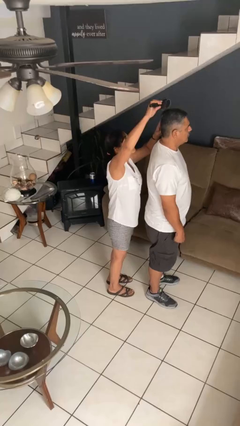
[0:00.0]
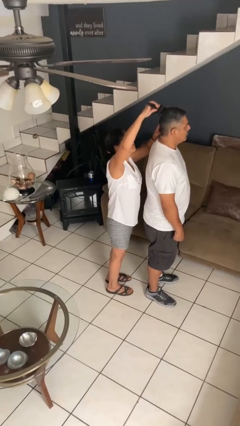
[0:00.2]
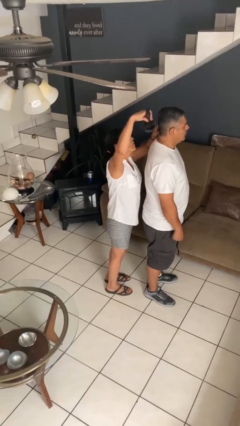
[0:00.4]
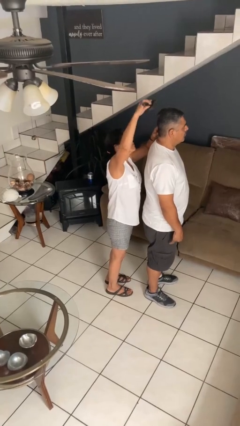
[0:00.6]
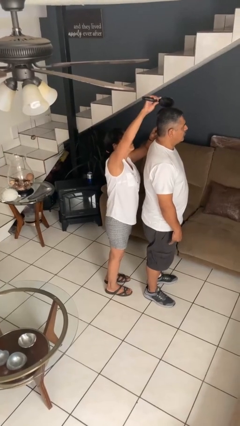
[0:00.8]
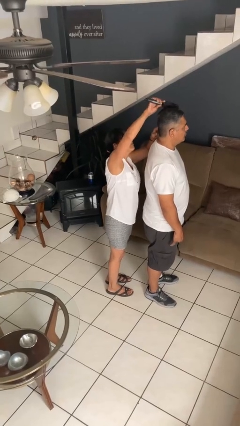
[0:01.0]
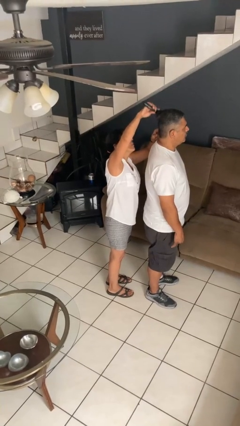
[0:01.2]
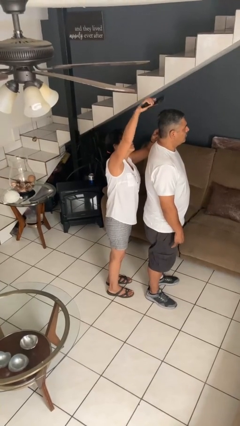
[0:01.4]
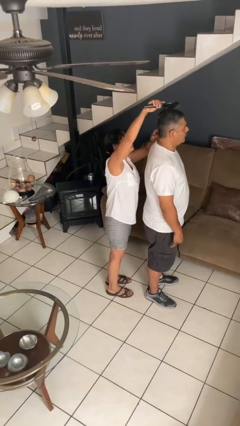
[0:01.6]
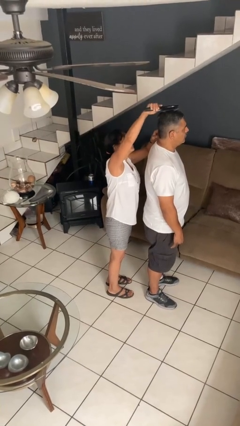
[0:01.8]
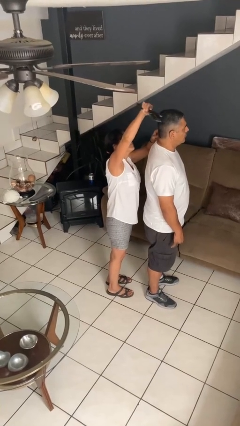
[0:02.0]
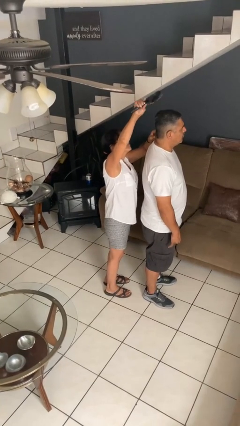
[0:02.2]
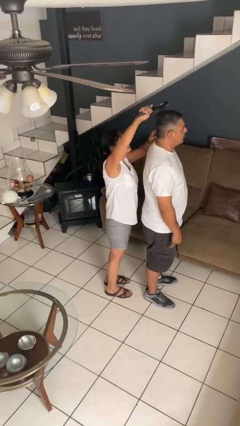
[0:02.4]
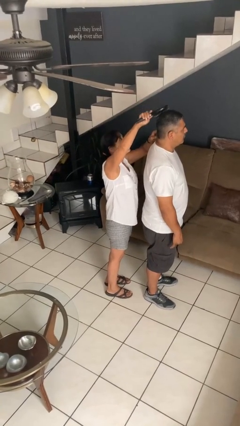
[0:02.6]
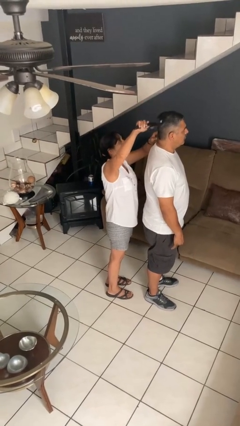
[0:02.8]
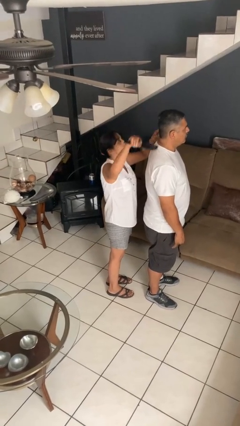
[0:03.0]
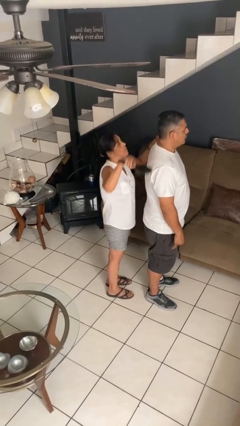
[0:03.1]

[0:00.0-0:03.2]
person brushes hair of person

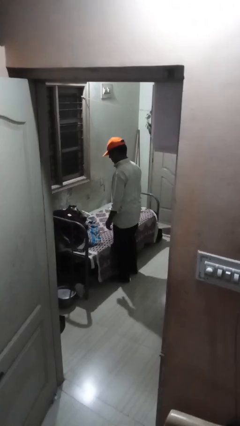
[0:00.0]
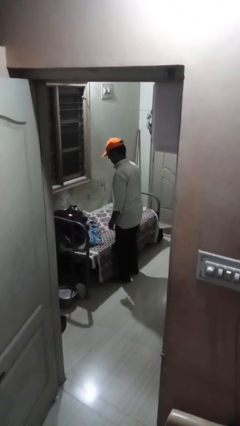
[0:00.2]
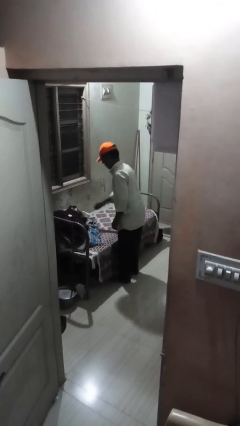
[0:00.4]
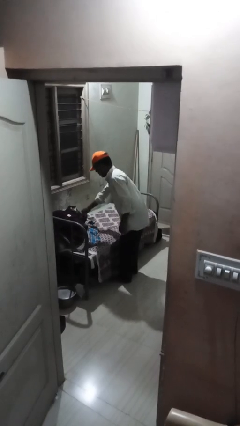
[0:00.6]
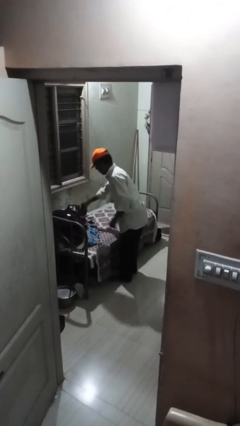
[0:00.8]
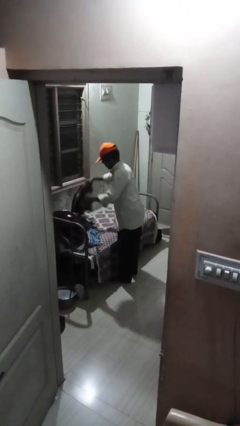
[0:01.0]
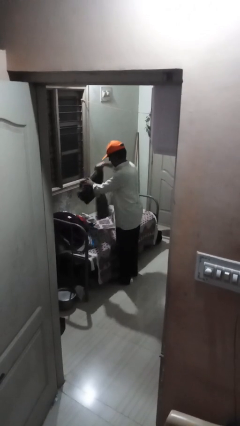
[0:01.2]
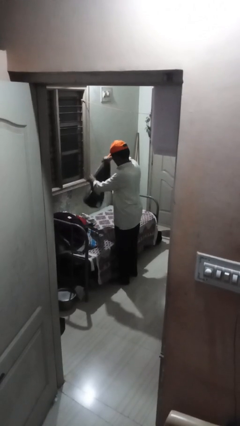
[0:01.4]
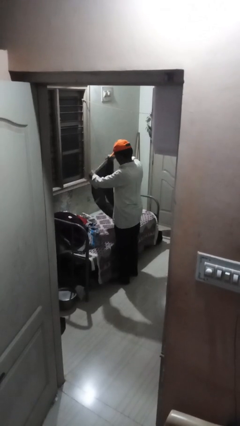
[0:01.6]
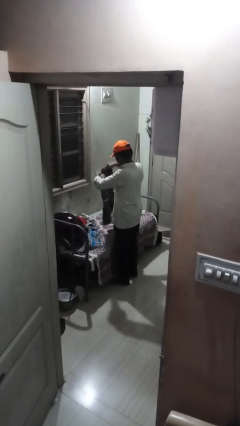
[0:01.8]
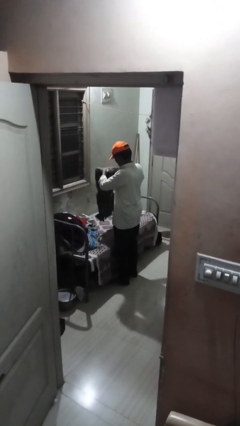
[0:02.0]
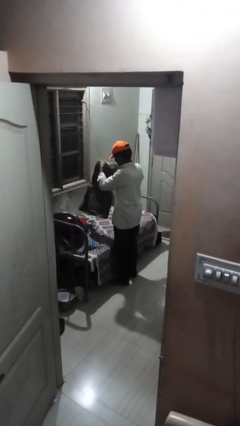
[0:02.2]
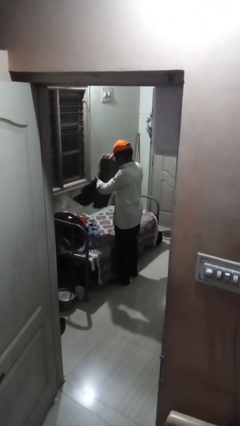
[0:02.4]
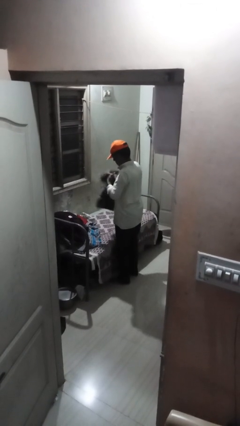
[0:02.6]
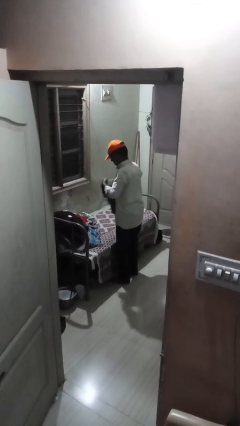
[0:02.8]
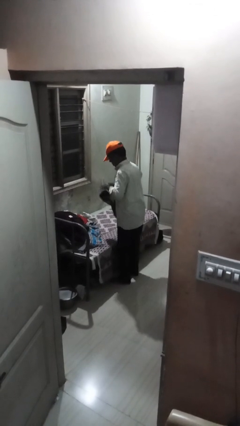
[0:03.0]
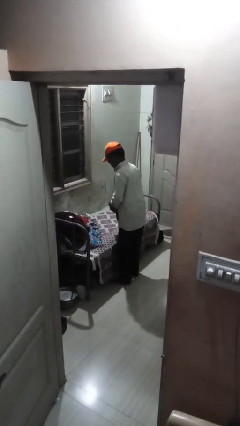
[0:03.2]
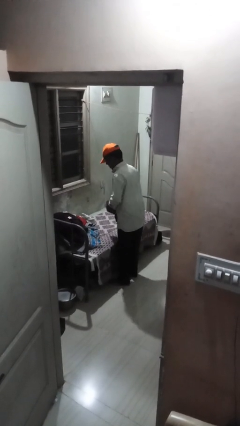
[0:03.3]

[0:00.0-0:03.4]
person folds pants

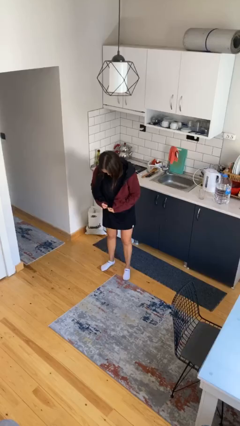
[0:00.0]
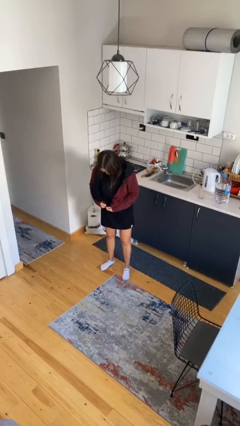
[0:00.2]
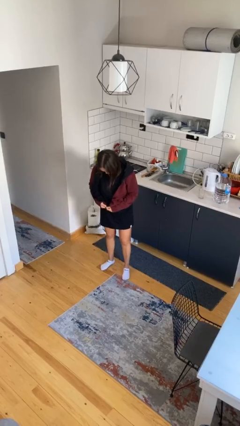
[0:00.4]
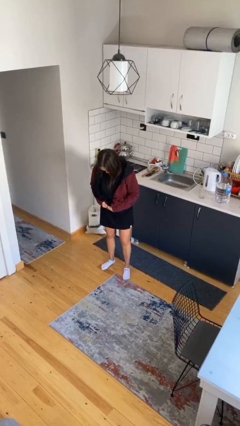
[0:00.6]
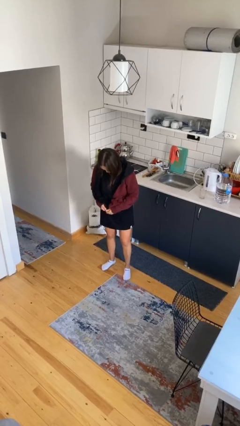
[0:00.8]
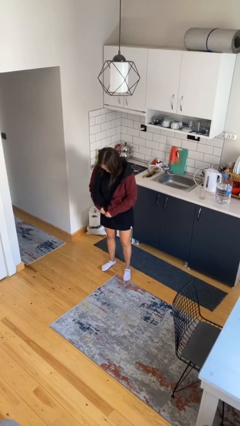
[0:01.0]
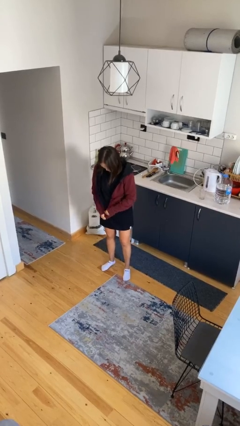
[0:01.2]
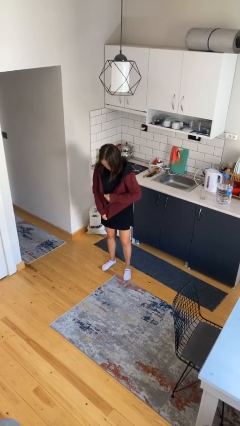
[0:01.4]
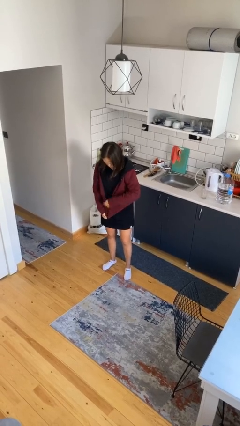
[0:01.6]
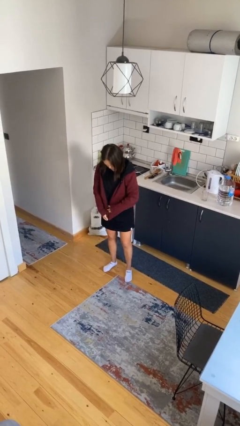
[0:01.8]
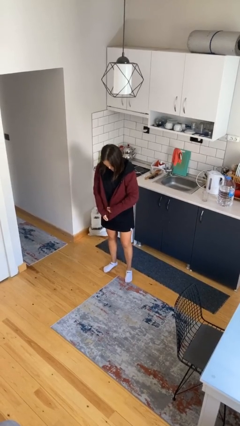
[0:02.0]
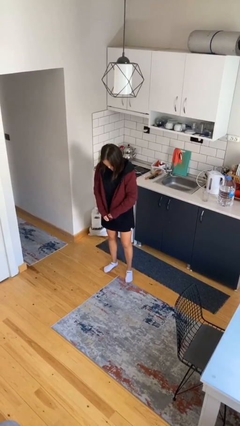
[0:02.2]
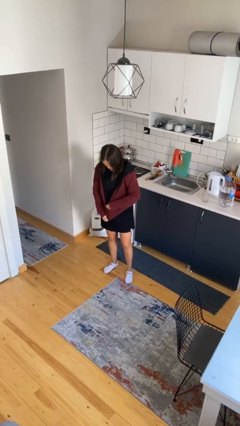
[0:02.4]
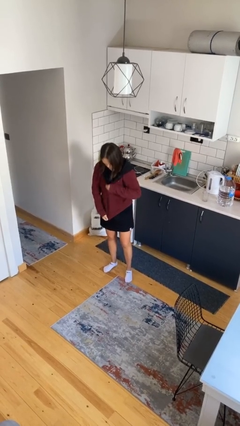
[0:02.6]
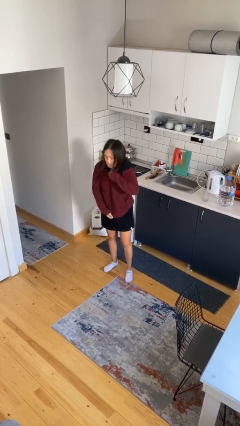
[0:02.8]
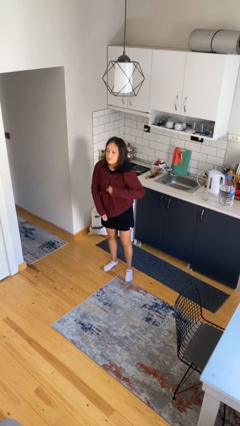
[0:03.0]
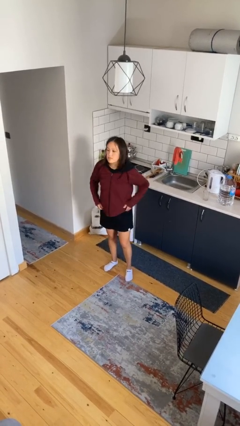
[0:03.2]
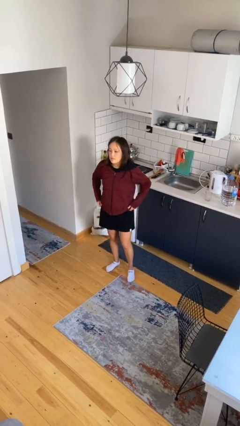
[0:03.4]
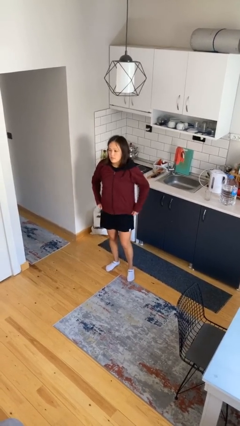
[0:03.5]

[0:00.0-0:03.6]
person zips up jacket

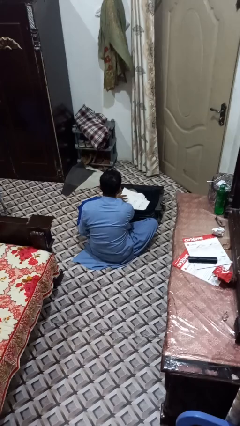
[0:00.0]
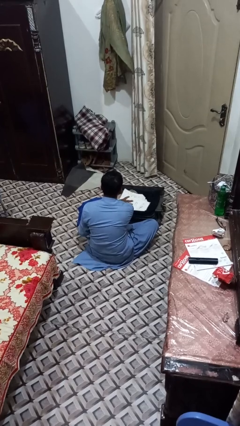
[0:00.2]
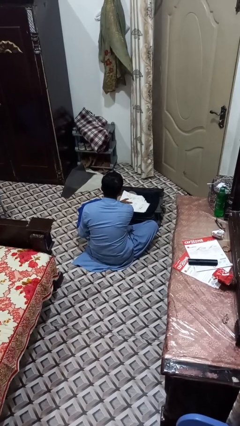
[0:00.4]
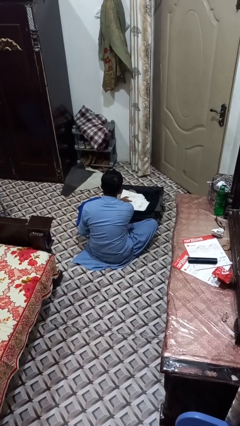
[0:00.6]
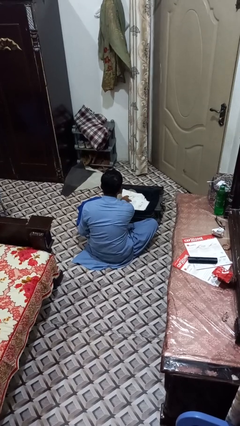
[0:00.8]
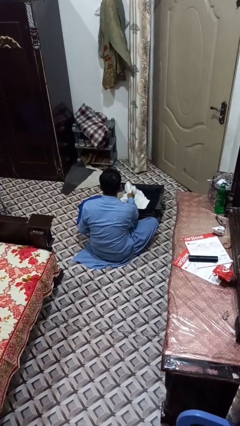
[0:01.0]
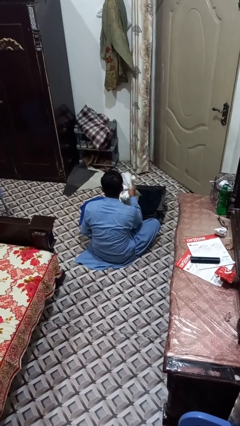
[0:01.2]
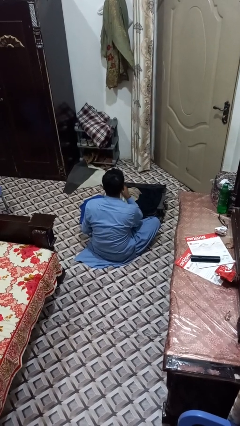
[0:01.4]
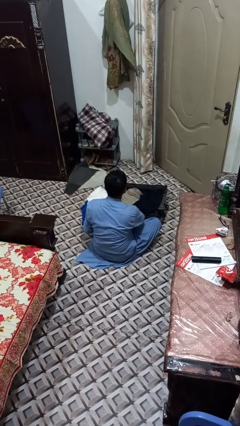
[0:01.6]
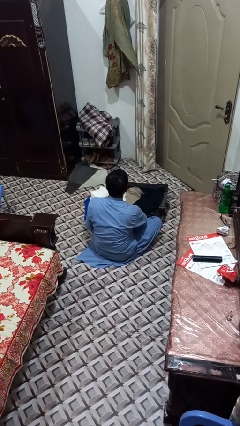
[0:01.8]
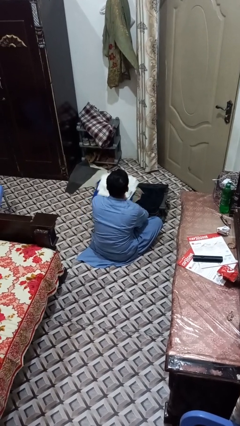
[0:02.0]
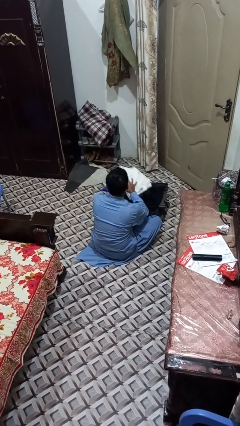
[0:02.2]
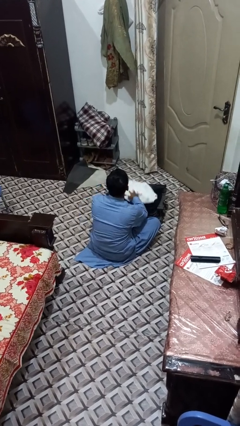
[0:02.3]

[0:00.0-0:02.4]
person unloads clothes from suitcase

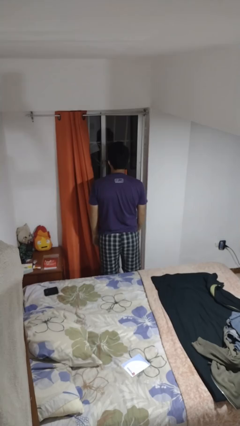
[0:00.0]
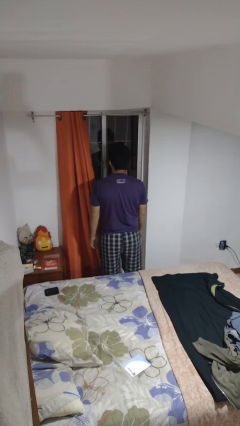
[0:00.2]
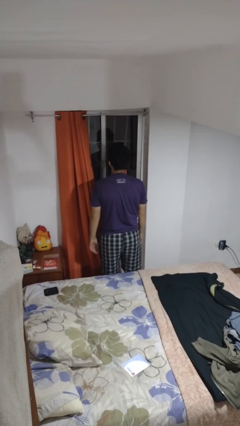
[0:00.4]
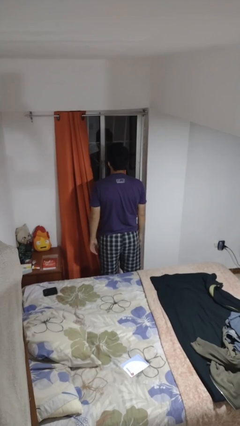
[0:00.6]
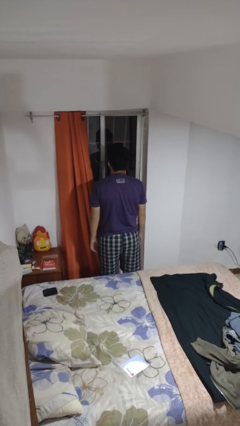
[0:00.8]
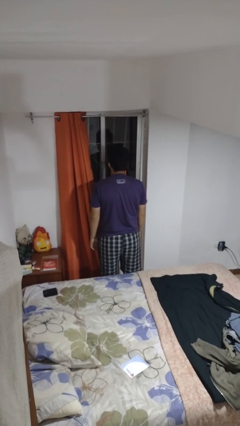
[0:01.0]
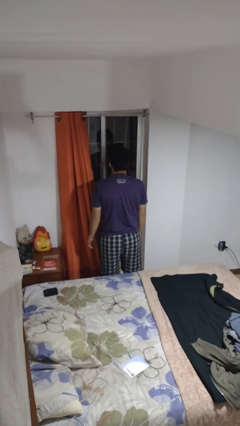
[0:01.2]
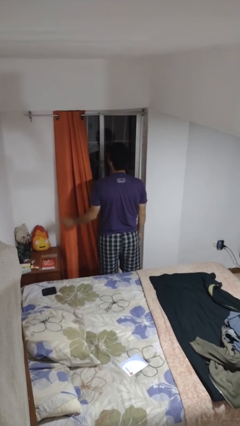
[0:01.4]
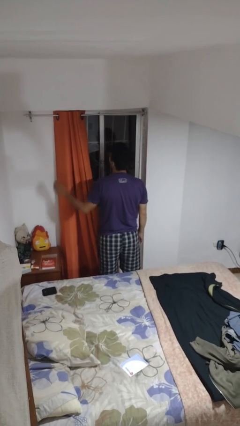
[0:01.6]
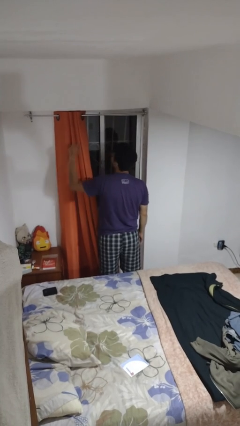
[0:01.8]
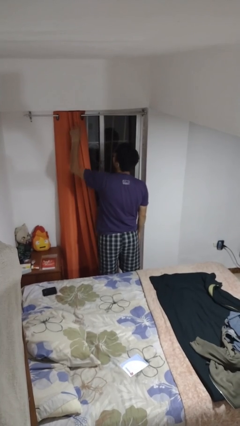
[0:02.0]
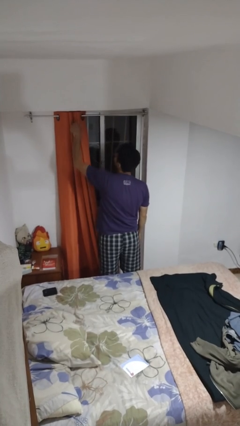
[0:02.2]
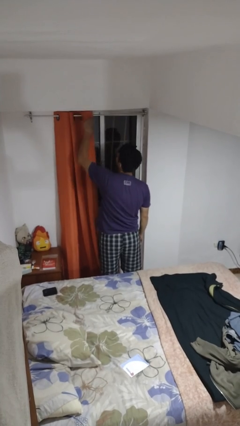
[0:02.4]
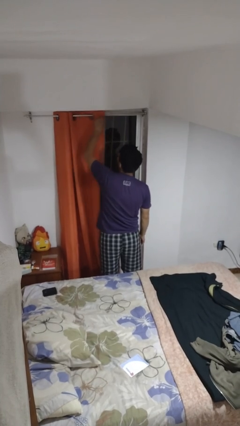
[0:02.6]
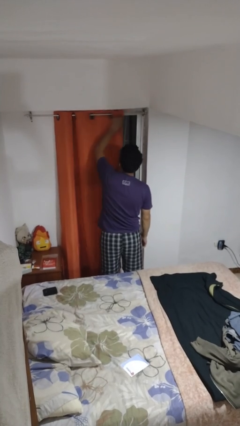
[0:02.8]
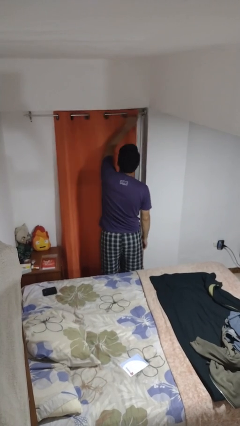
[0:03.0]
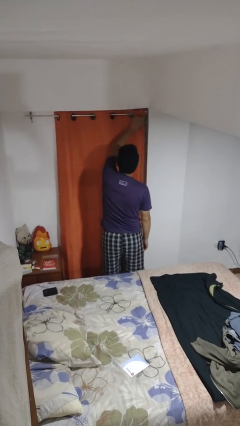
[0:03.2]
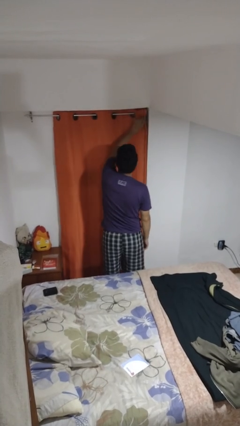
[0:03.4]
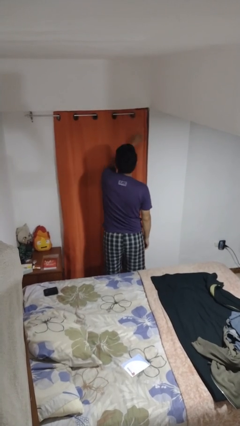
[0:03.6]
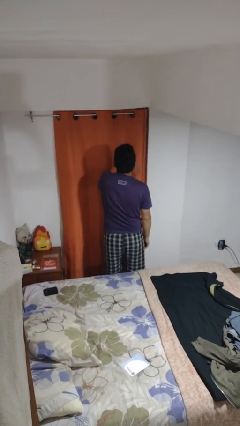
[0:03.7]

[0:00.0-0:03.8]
person closes curtains

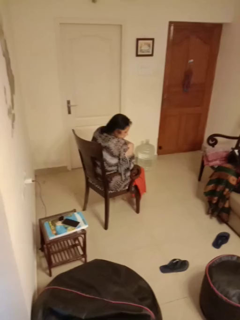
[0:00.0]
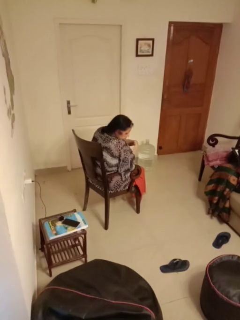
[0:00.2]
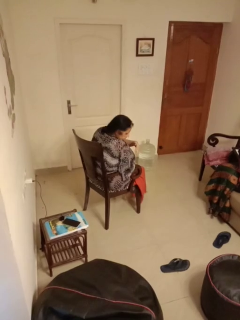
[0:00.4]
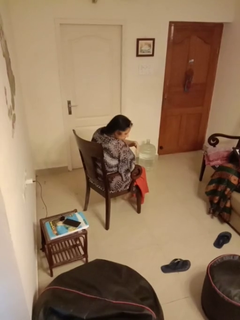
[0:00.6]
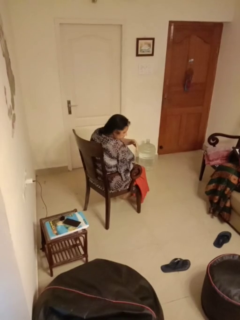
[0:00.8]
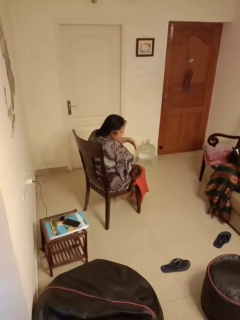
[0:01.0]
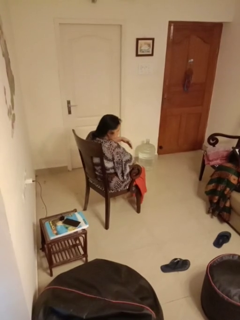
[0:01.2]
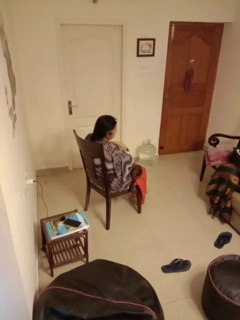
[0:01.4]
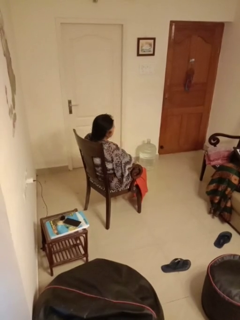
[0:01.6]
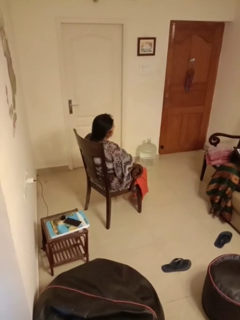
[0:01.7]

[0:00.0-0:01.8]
person swats bug
